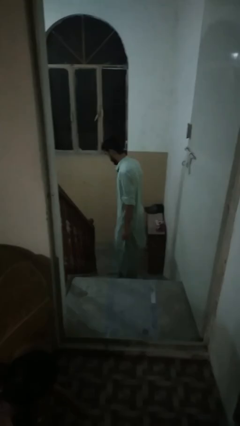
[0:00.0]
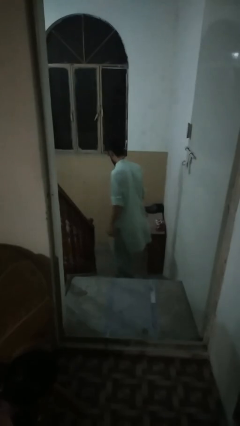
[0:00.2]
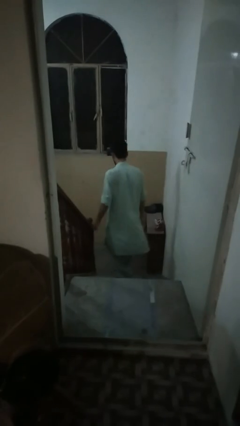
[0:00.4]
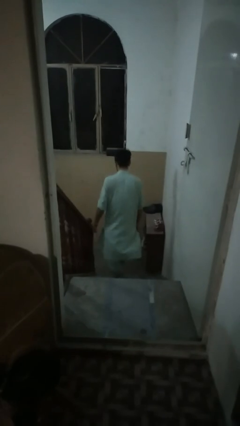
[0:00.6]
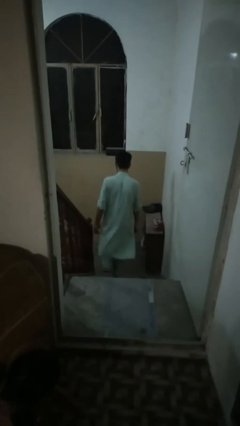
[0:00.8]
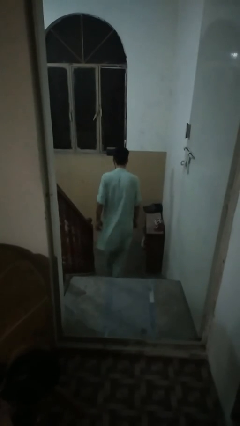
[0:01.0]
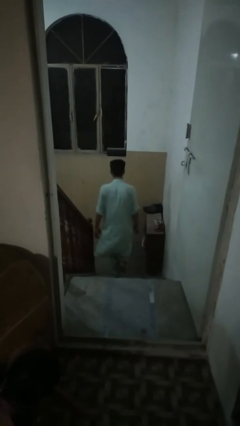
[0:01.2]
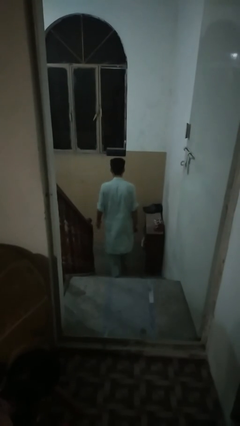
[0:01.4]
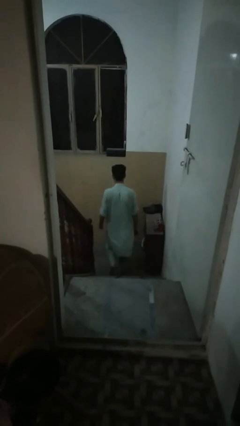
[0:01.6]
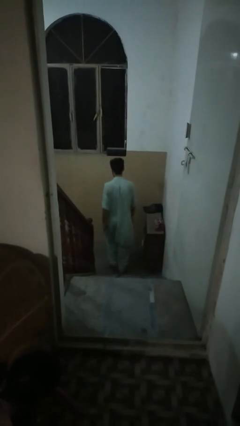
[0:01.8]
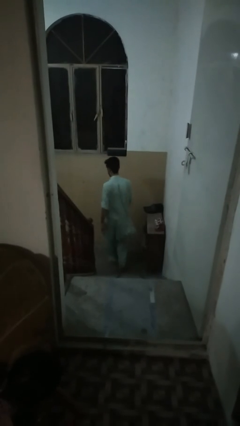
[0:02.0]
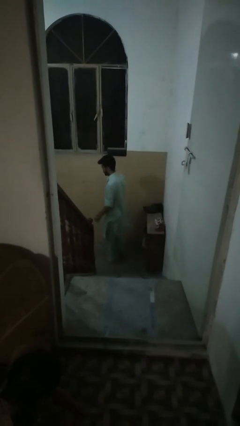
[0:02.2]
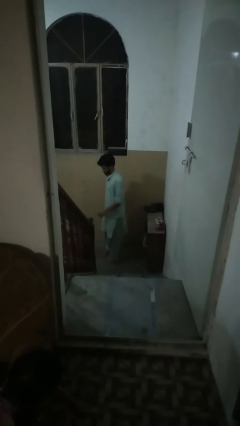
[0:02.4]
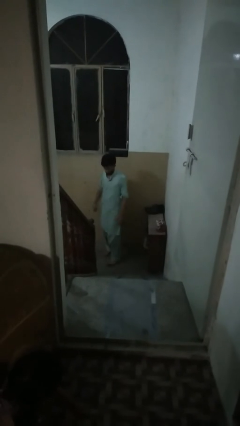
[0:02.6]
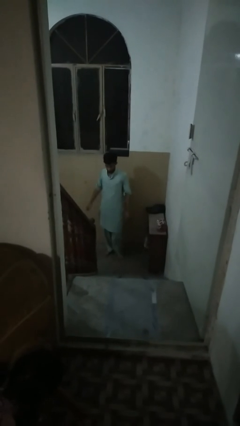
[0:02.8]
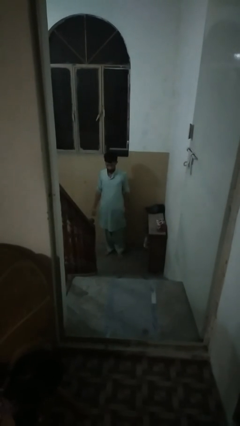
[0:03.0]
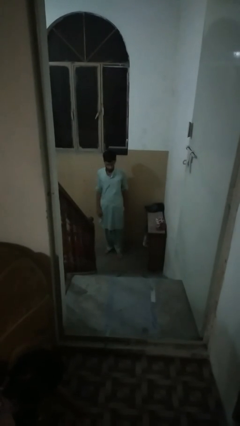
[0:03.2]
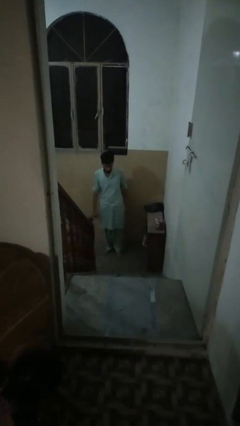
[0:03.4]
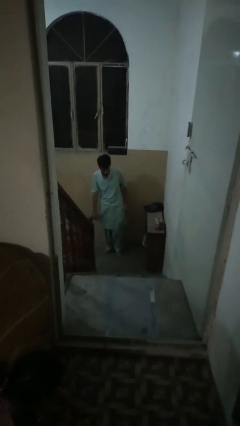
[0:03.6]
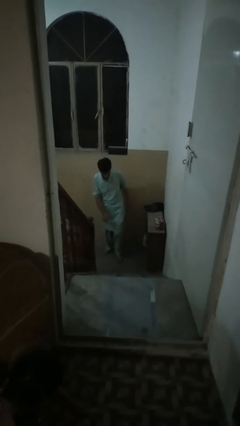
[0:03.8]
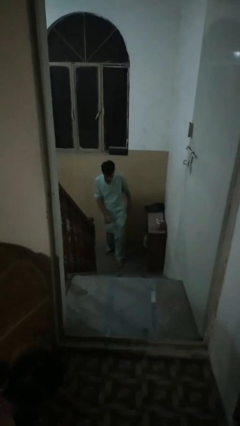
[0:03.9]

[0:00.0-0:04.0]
person climbs down stairs

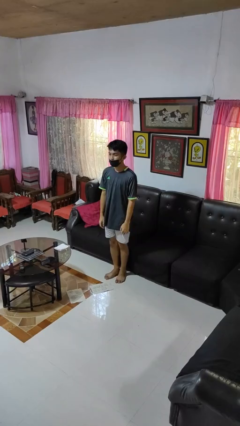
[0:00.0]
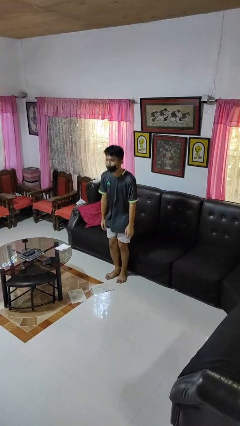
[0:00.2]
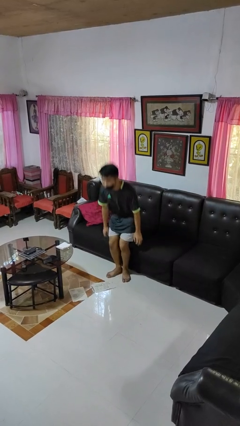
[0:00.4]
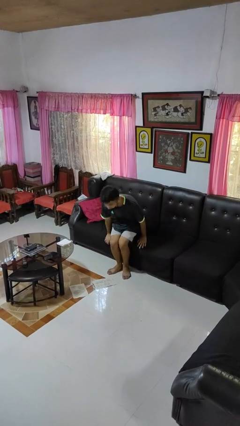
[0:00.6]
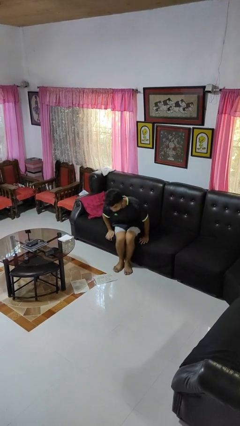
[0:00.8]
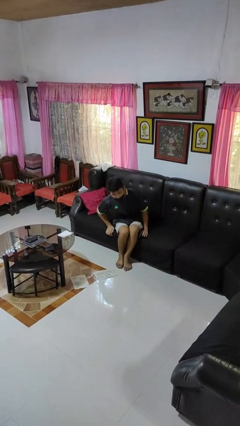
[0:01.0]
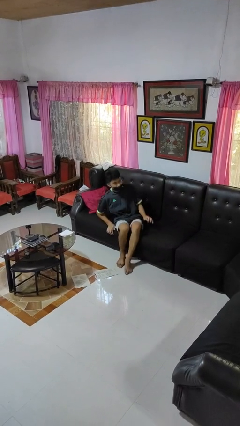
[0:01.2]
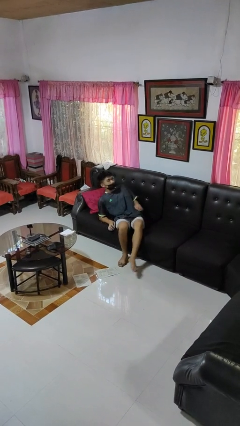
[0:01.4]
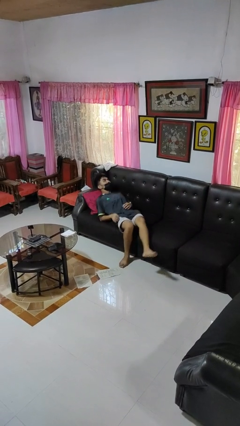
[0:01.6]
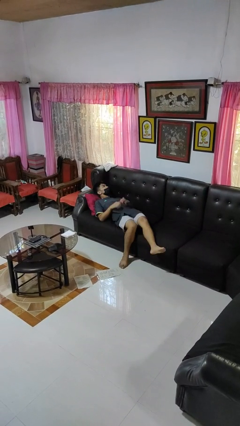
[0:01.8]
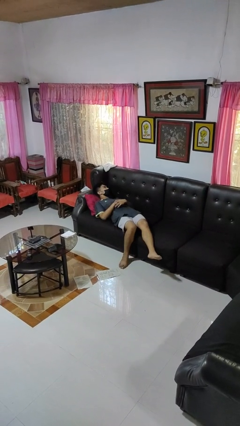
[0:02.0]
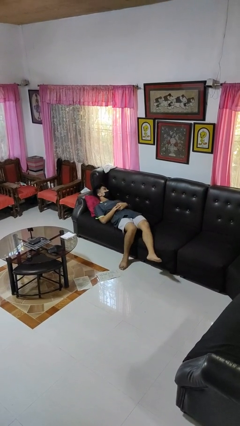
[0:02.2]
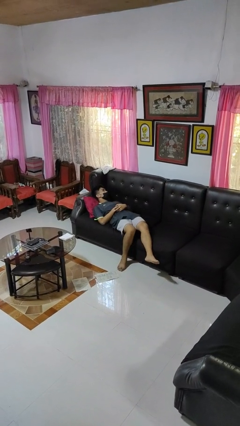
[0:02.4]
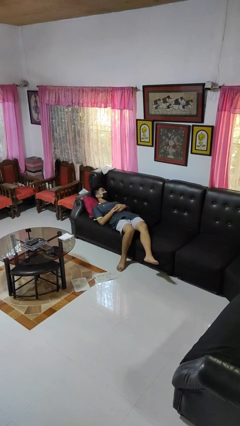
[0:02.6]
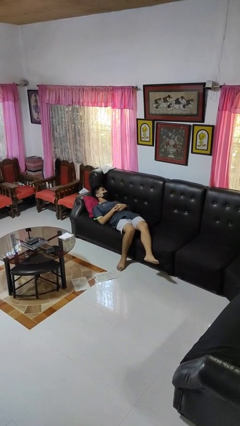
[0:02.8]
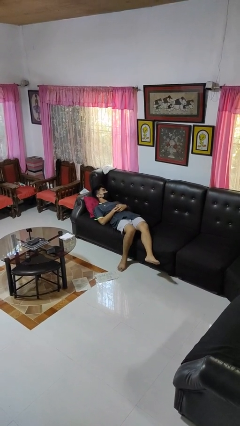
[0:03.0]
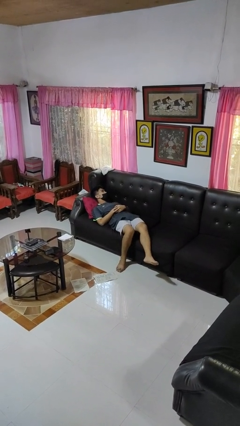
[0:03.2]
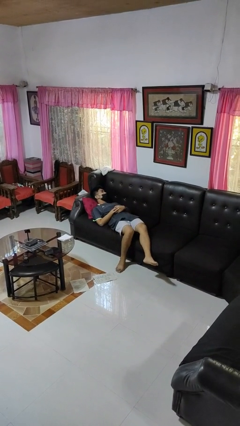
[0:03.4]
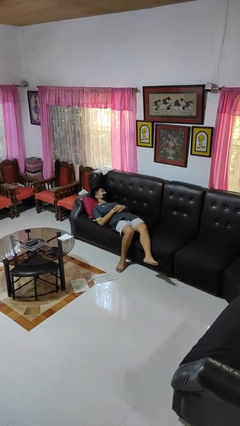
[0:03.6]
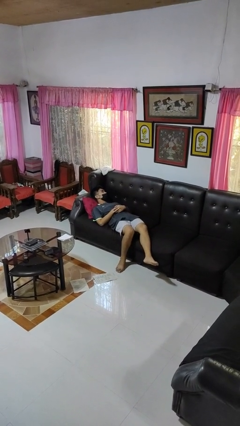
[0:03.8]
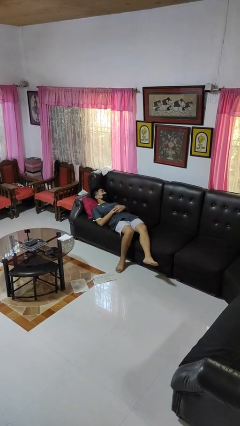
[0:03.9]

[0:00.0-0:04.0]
person lies down on couch

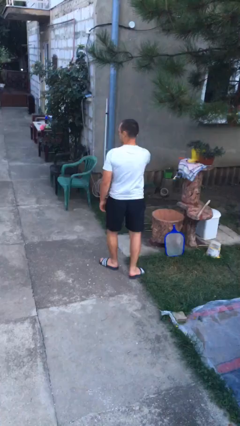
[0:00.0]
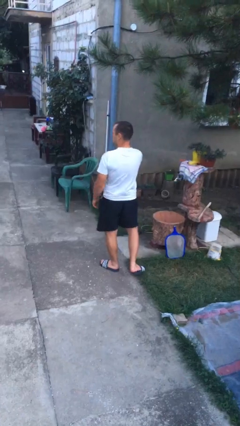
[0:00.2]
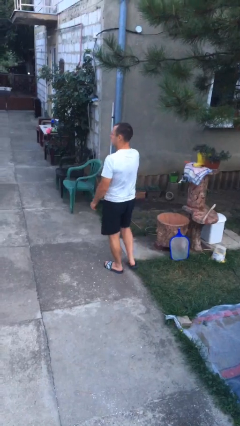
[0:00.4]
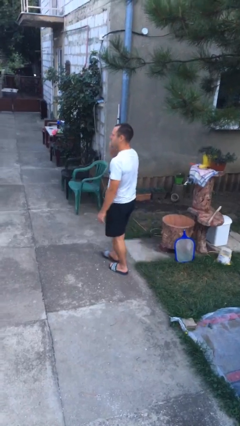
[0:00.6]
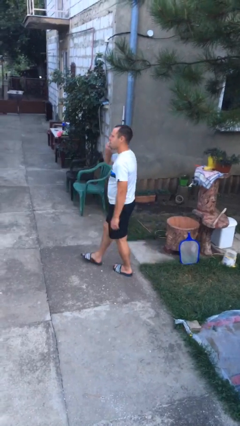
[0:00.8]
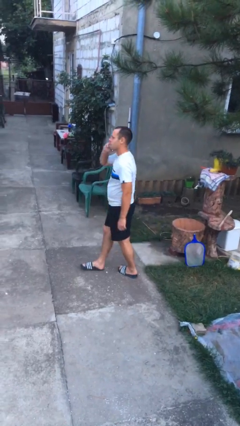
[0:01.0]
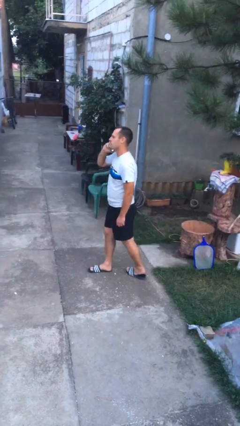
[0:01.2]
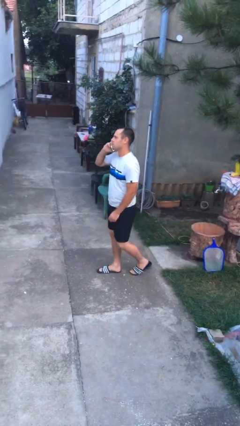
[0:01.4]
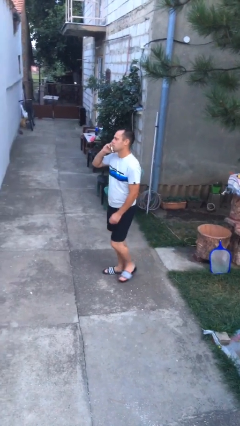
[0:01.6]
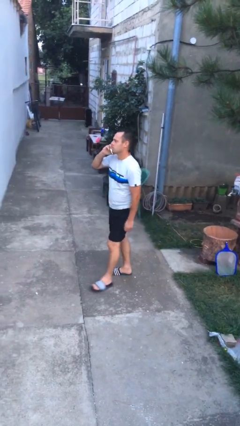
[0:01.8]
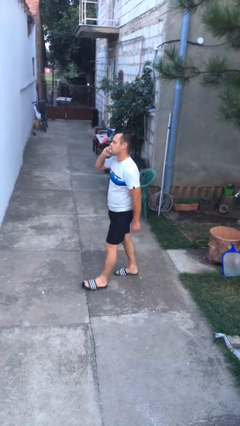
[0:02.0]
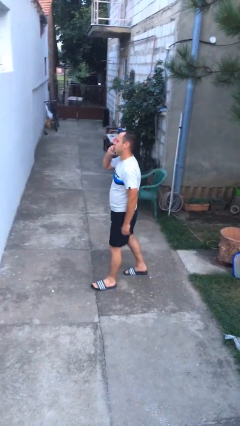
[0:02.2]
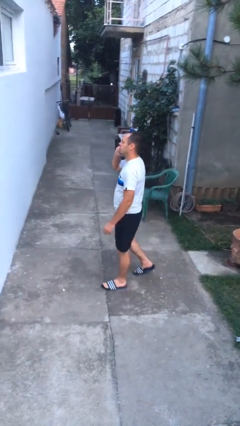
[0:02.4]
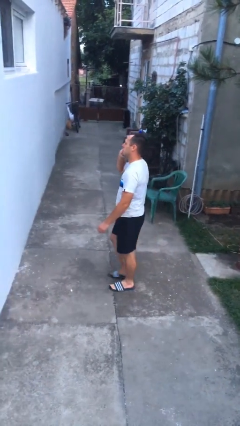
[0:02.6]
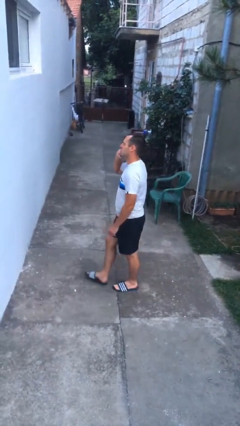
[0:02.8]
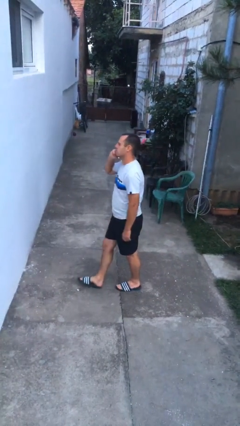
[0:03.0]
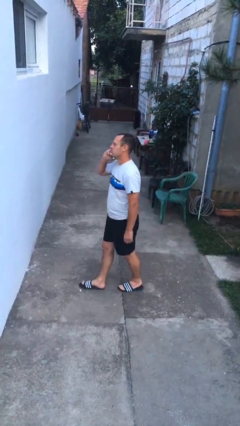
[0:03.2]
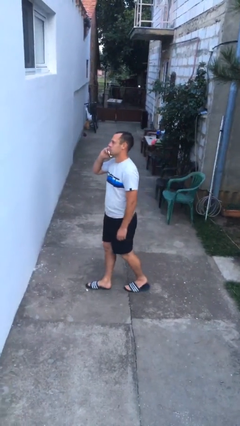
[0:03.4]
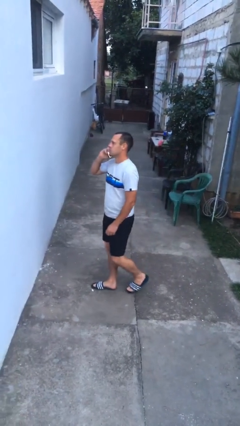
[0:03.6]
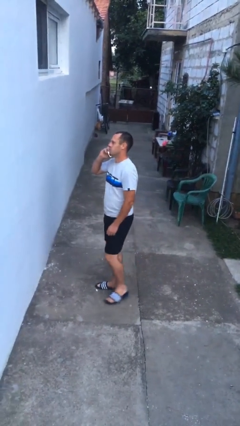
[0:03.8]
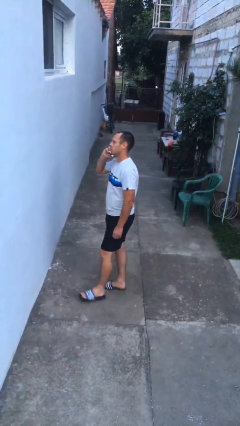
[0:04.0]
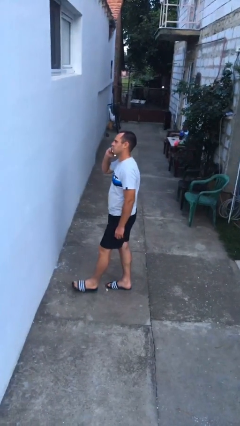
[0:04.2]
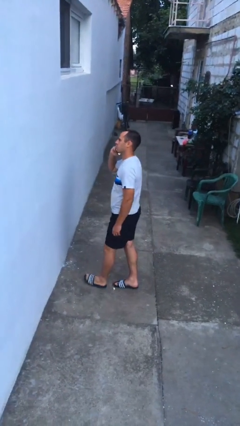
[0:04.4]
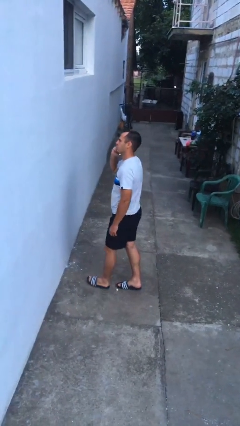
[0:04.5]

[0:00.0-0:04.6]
person talks on phone

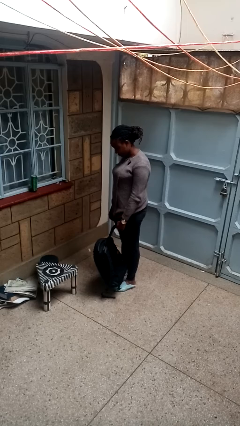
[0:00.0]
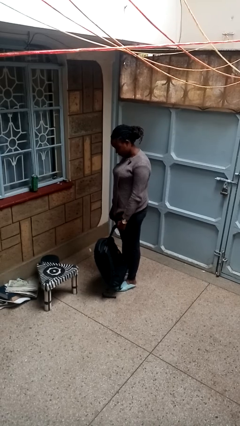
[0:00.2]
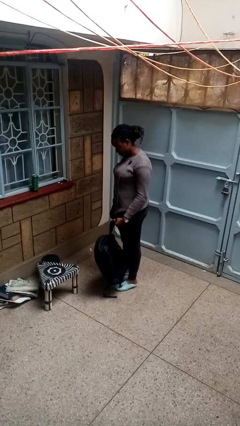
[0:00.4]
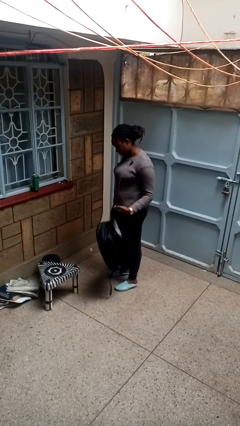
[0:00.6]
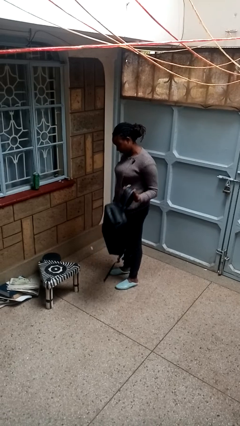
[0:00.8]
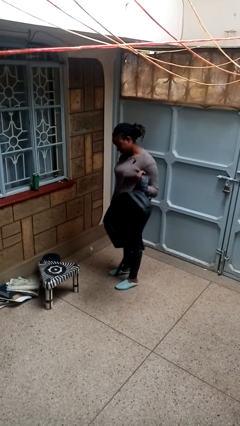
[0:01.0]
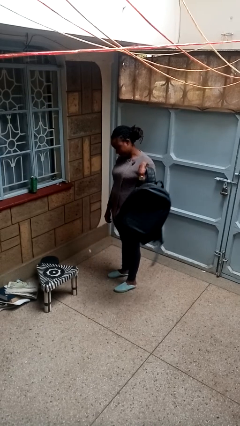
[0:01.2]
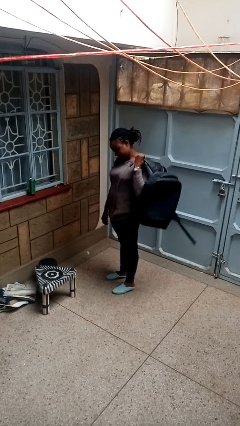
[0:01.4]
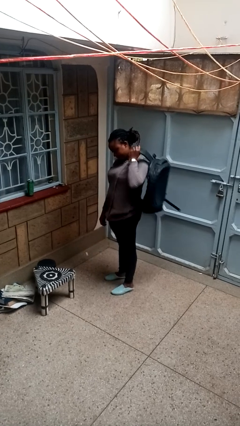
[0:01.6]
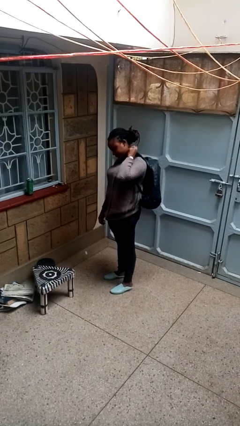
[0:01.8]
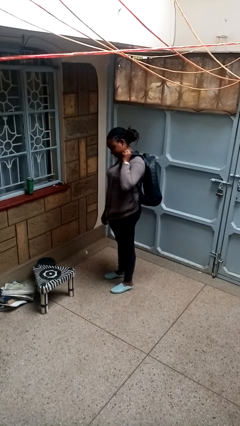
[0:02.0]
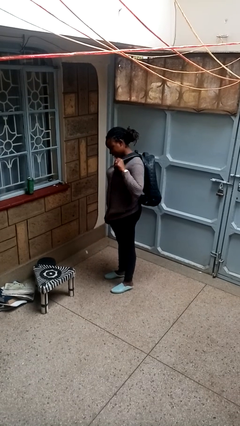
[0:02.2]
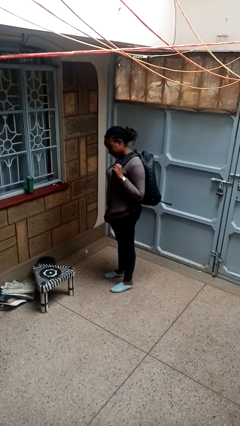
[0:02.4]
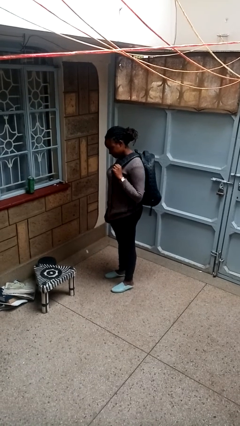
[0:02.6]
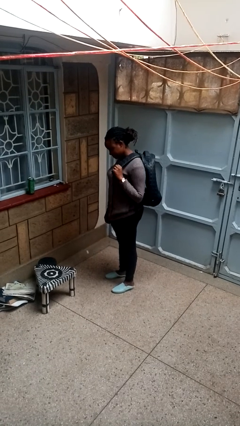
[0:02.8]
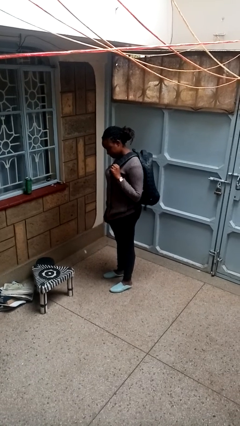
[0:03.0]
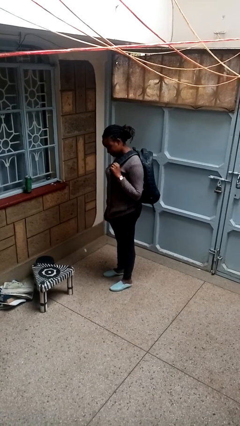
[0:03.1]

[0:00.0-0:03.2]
person puts on backpack

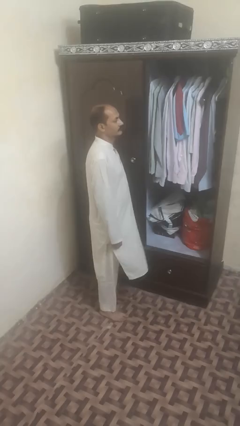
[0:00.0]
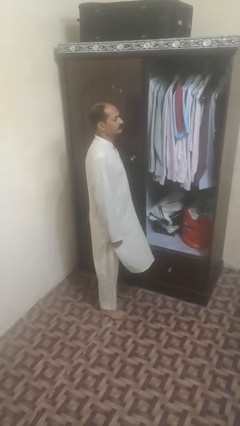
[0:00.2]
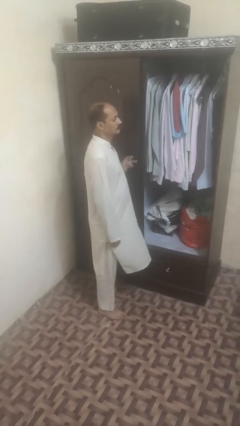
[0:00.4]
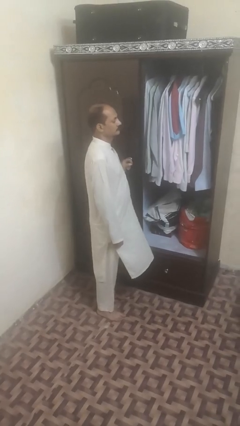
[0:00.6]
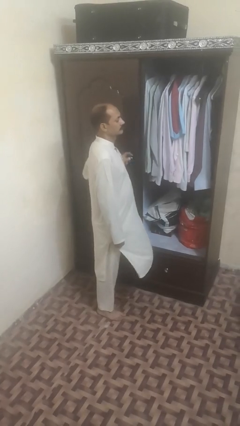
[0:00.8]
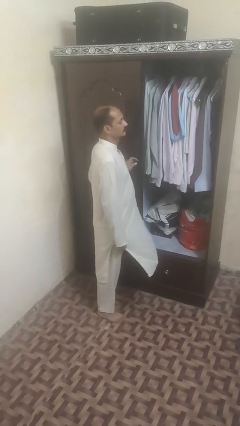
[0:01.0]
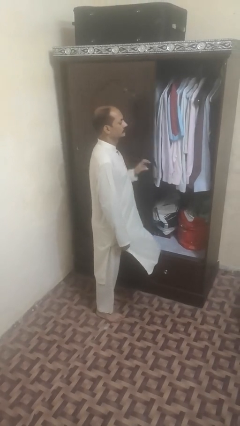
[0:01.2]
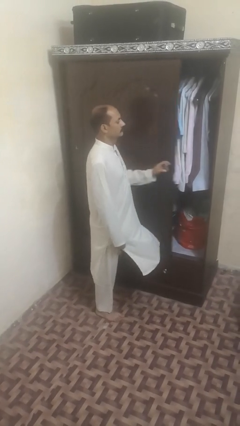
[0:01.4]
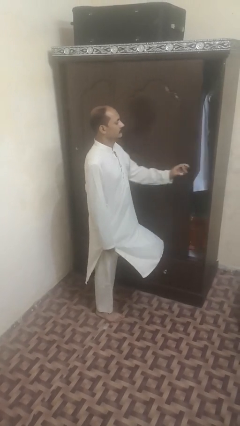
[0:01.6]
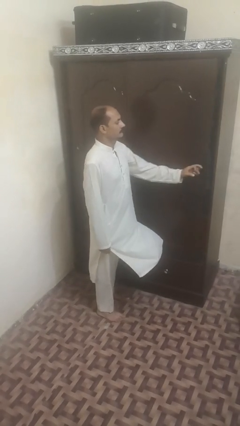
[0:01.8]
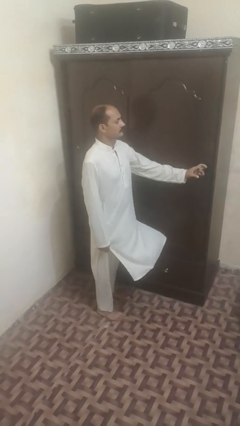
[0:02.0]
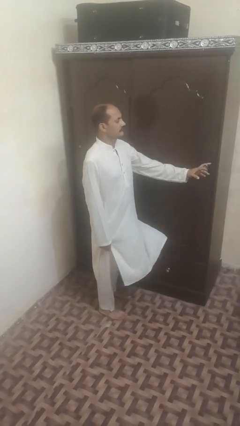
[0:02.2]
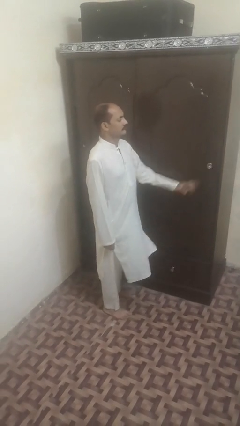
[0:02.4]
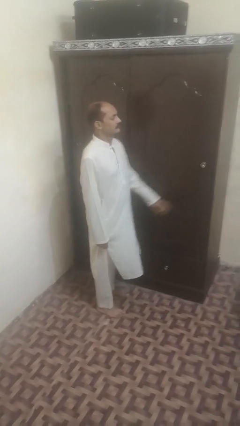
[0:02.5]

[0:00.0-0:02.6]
person closes sliding door
